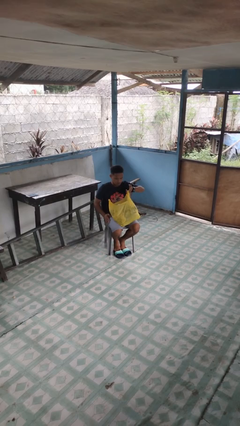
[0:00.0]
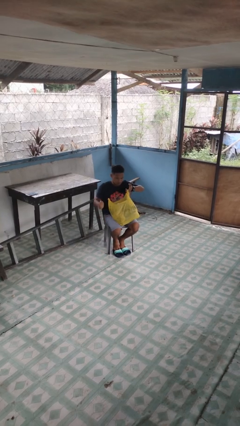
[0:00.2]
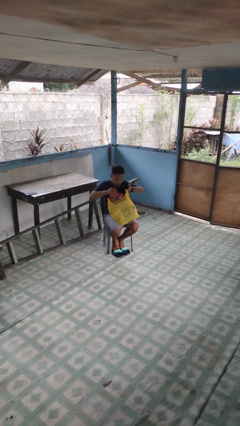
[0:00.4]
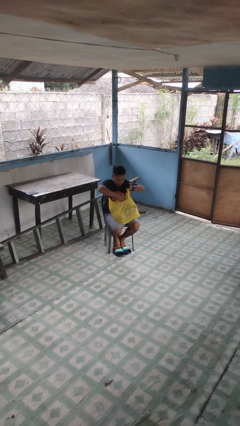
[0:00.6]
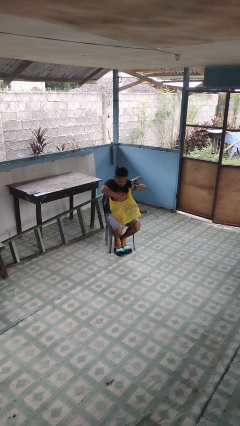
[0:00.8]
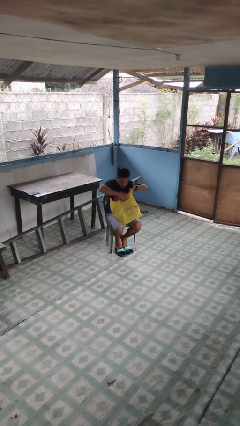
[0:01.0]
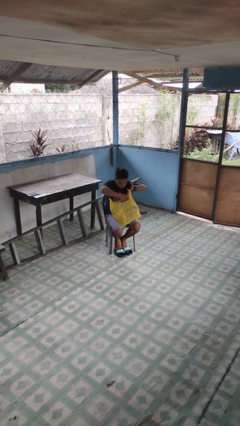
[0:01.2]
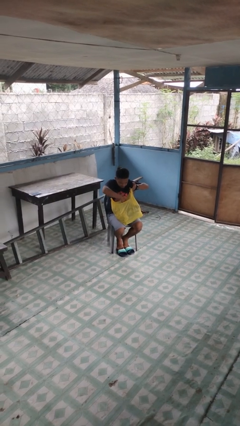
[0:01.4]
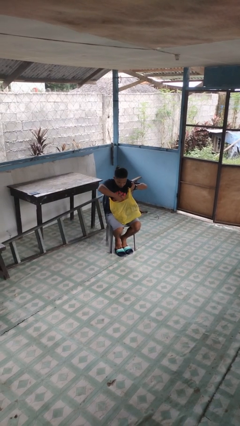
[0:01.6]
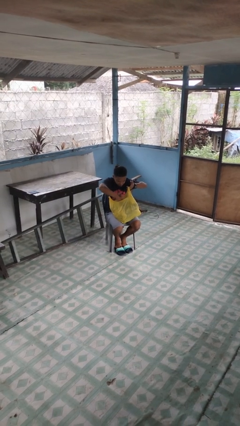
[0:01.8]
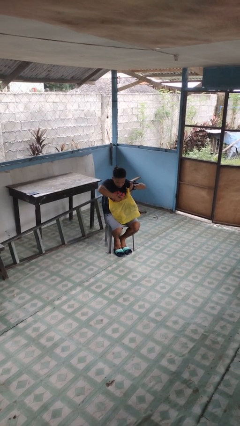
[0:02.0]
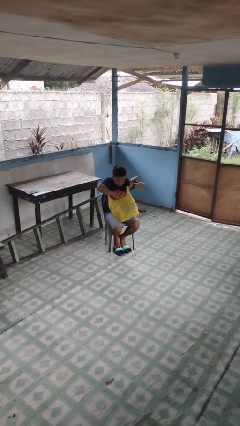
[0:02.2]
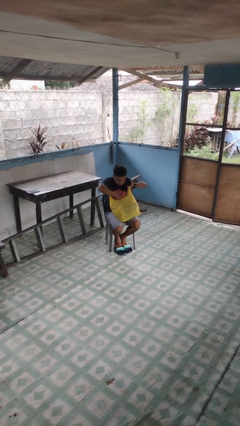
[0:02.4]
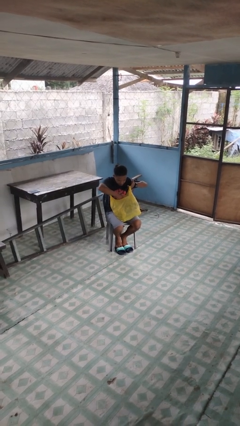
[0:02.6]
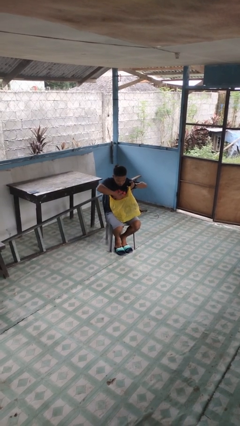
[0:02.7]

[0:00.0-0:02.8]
person searches in bag

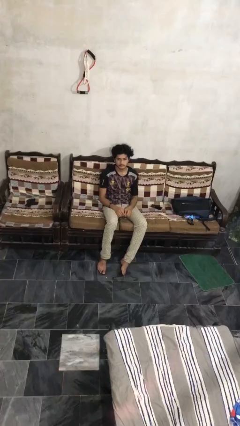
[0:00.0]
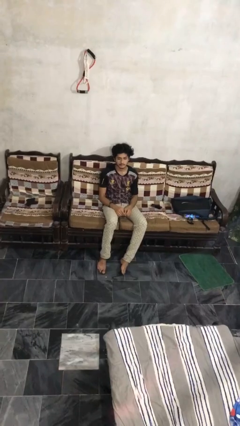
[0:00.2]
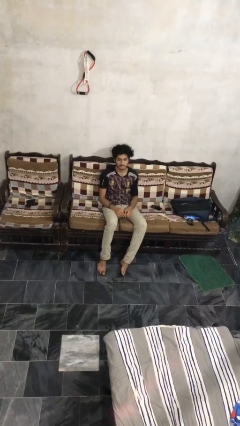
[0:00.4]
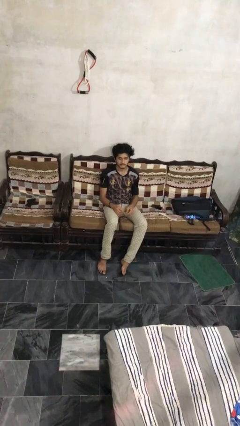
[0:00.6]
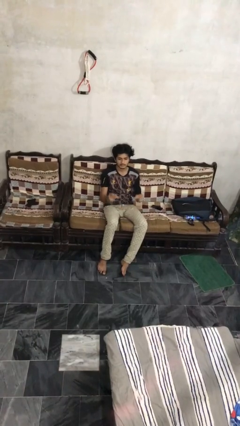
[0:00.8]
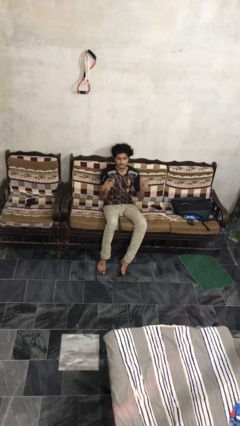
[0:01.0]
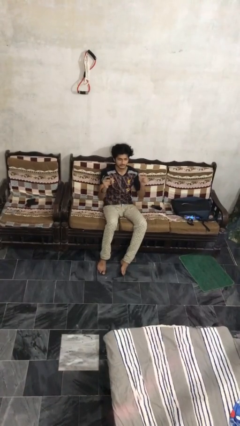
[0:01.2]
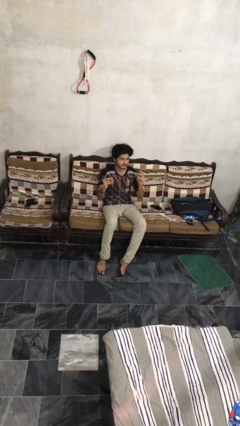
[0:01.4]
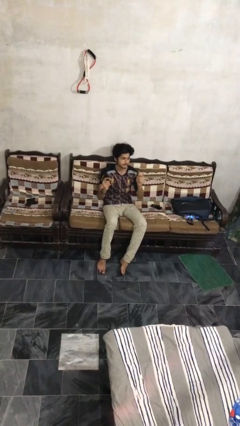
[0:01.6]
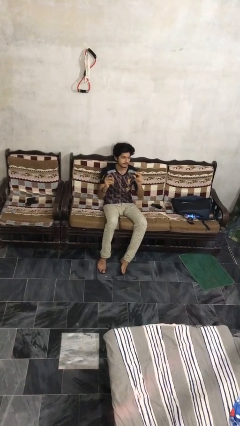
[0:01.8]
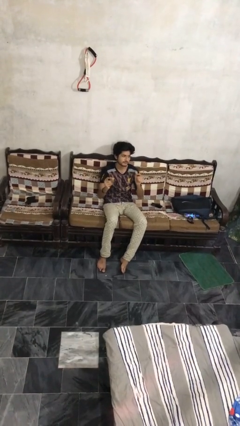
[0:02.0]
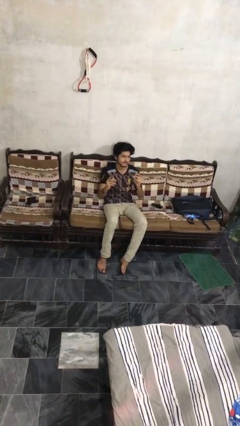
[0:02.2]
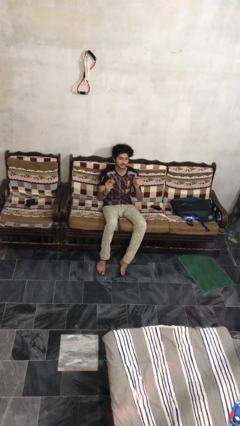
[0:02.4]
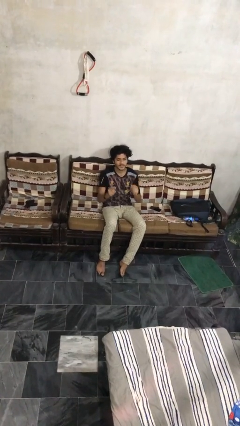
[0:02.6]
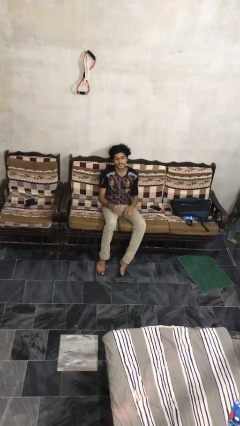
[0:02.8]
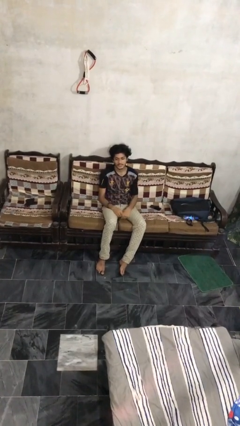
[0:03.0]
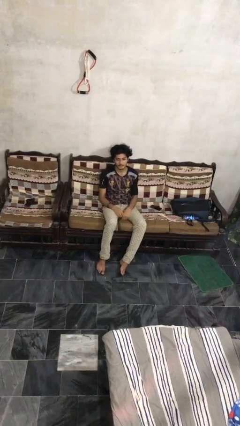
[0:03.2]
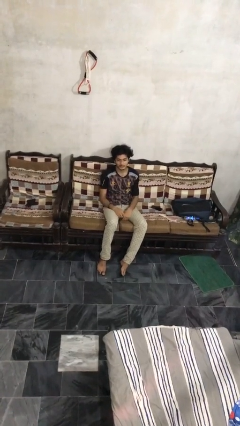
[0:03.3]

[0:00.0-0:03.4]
person snaps fingers

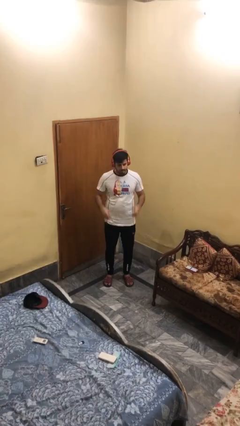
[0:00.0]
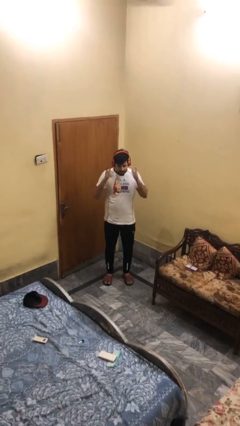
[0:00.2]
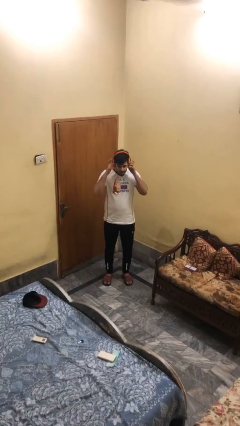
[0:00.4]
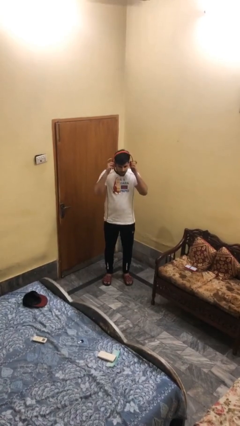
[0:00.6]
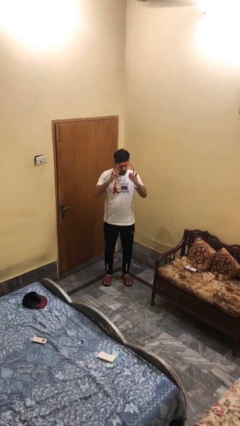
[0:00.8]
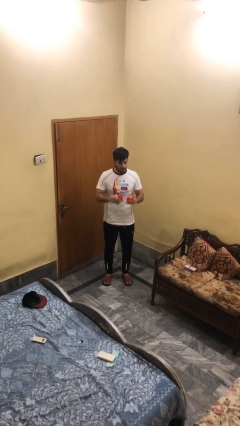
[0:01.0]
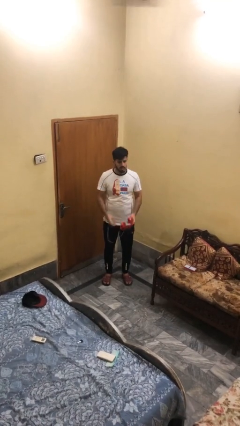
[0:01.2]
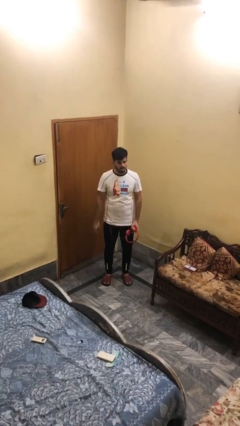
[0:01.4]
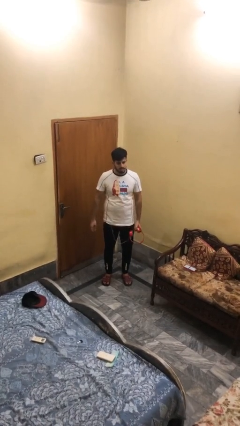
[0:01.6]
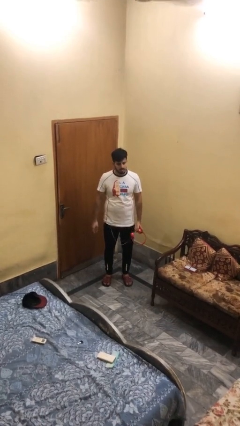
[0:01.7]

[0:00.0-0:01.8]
person takes off headphones

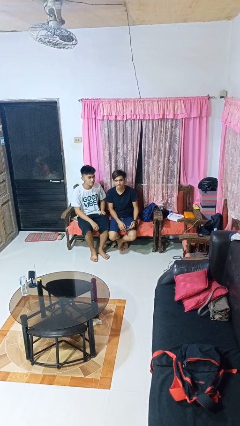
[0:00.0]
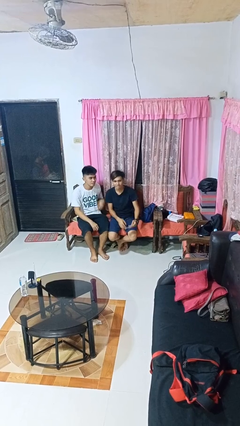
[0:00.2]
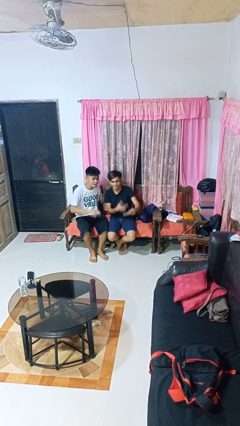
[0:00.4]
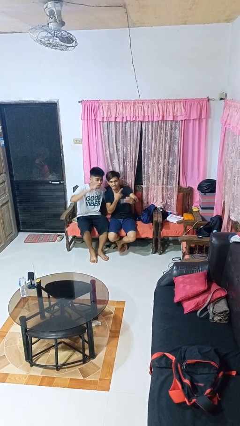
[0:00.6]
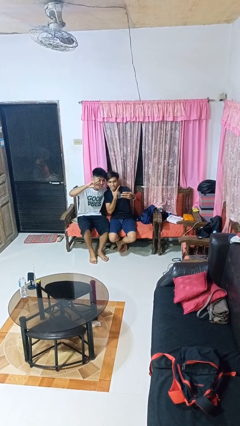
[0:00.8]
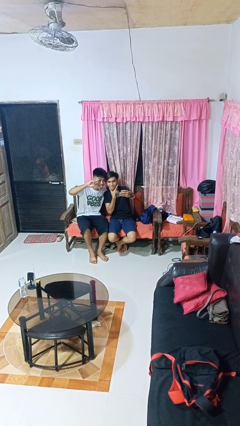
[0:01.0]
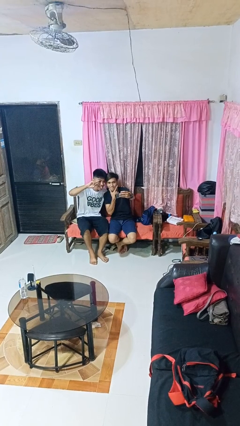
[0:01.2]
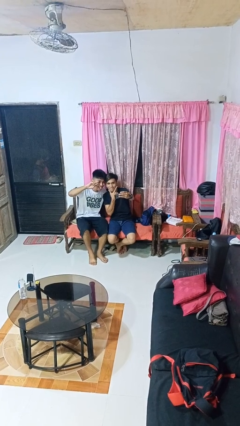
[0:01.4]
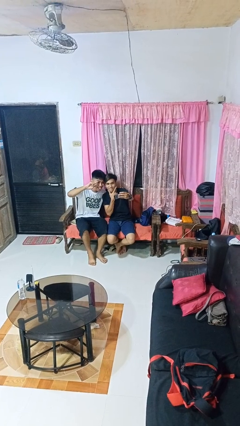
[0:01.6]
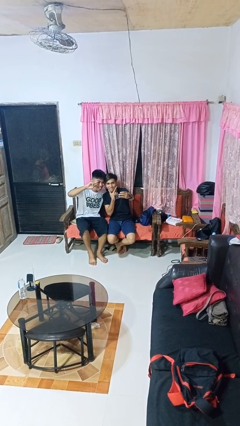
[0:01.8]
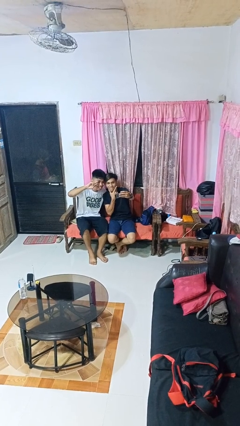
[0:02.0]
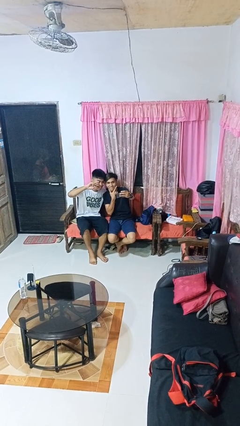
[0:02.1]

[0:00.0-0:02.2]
person takes selfie with person

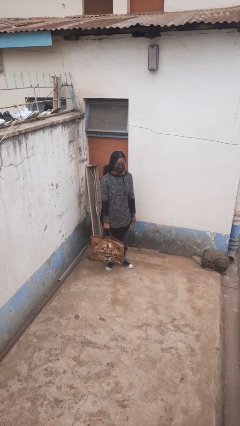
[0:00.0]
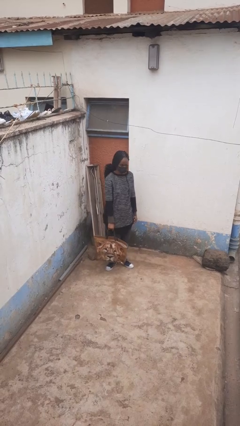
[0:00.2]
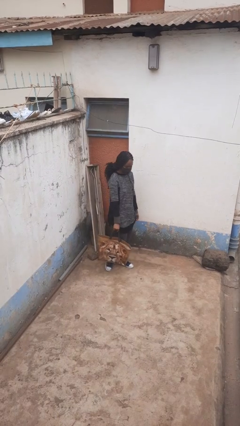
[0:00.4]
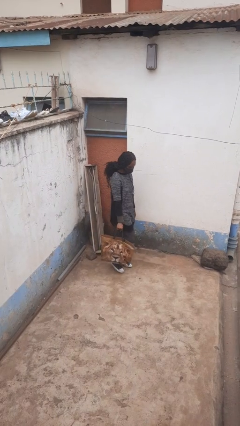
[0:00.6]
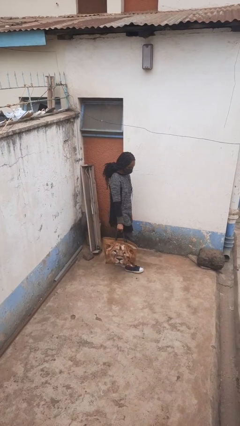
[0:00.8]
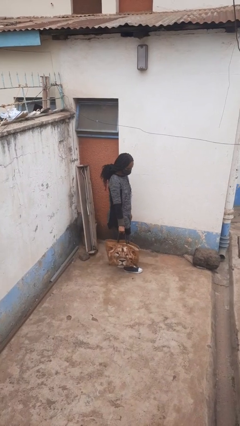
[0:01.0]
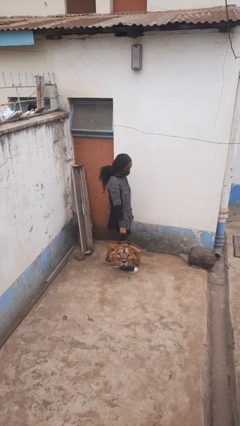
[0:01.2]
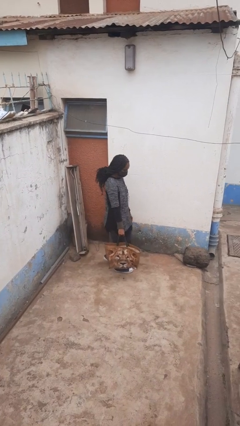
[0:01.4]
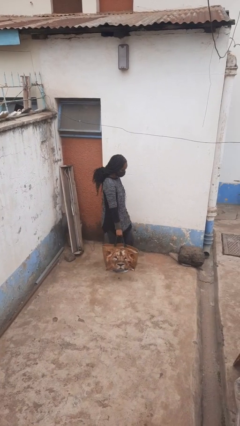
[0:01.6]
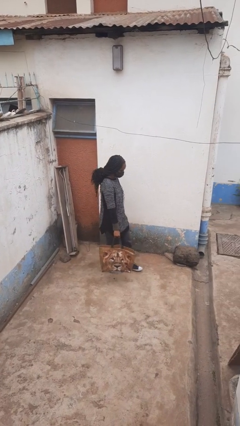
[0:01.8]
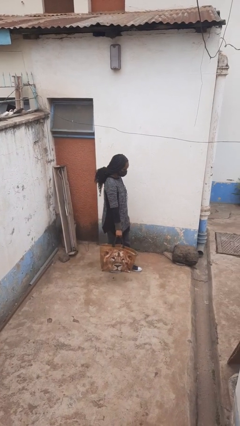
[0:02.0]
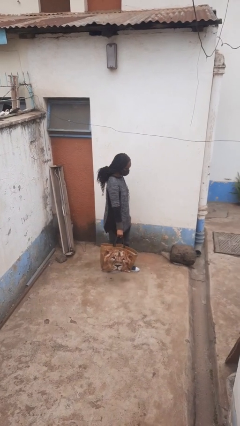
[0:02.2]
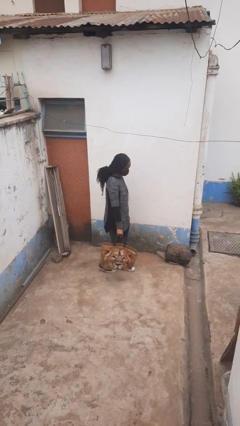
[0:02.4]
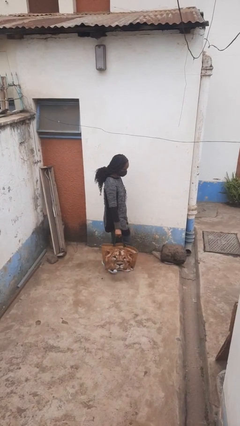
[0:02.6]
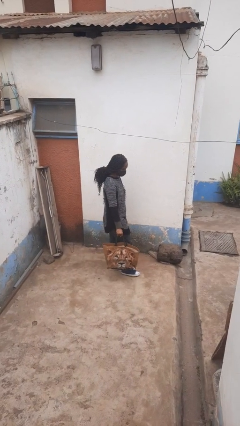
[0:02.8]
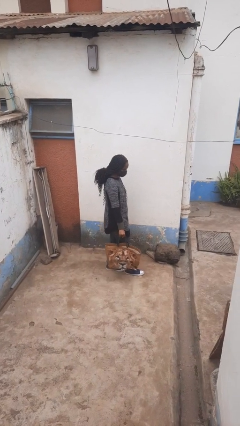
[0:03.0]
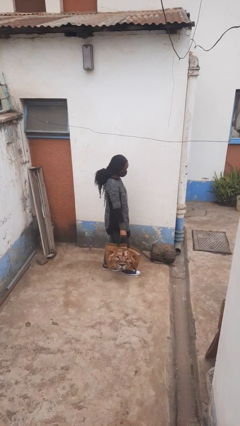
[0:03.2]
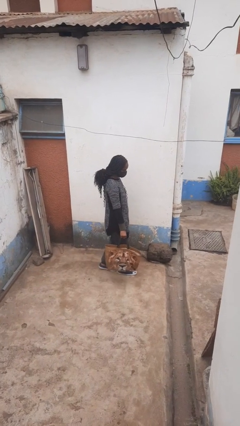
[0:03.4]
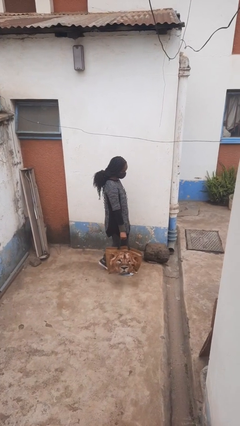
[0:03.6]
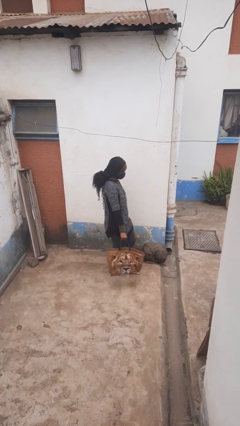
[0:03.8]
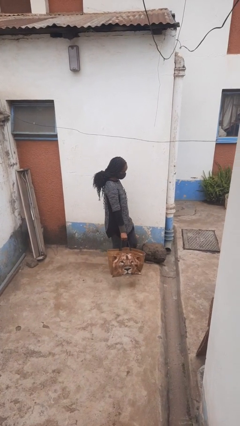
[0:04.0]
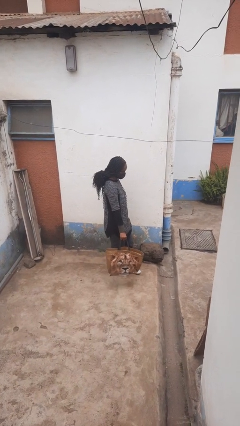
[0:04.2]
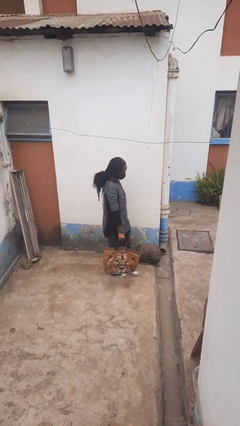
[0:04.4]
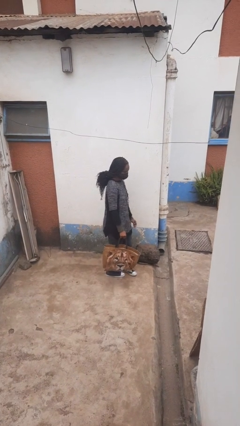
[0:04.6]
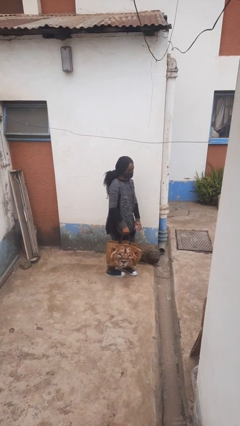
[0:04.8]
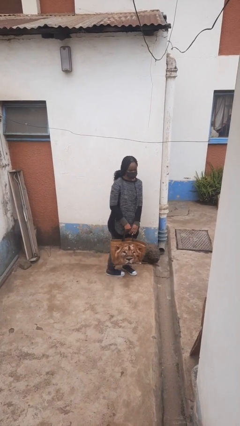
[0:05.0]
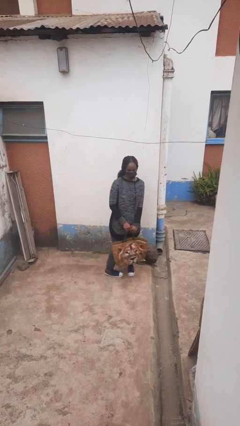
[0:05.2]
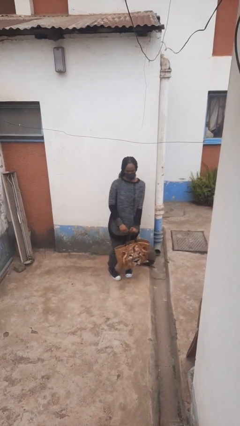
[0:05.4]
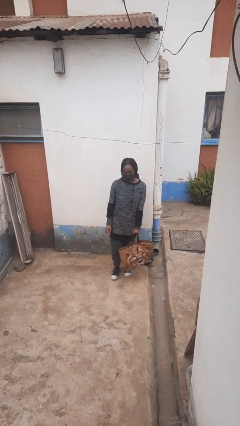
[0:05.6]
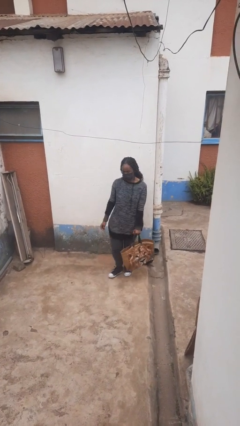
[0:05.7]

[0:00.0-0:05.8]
person carries groceries

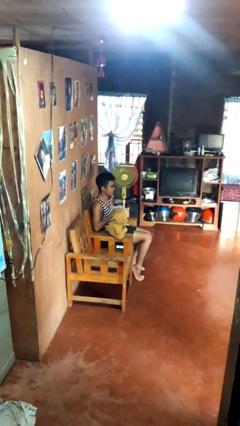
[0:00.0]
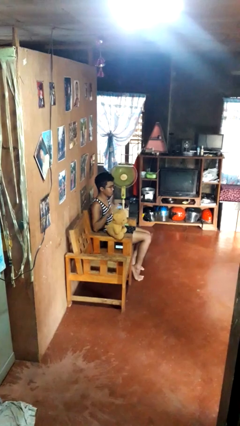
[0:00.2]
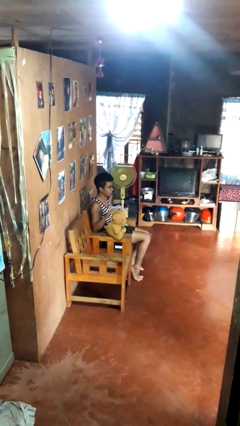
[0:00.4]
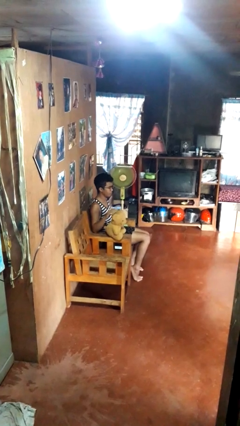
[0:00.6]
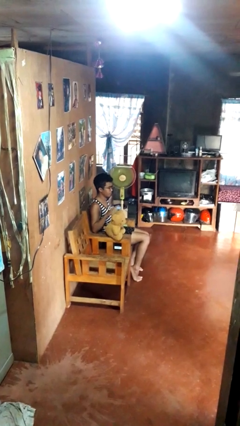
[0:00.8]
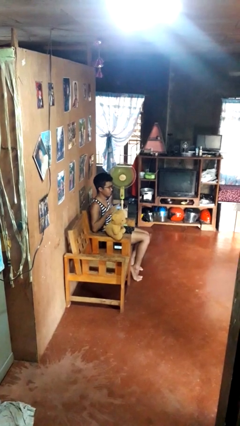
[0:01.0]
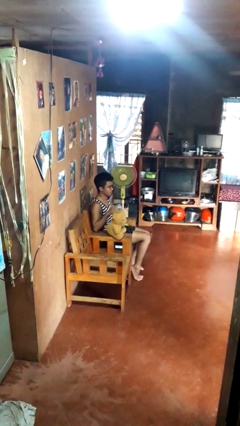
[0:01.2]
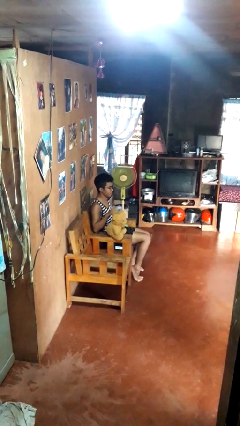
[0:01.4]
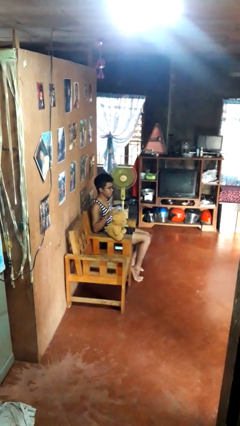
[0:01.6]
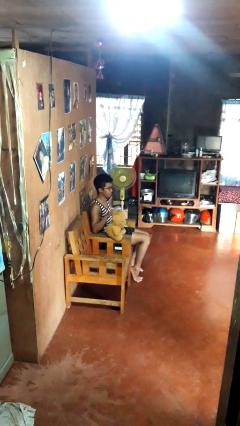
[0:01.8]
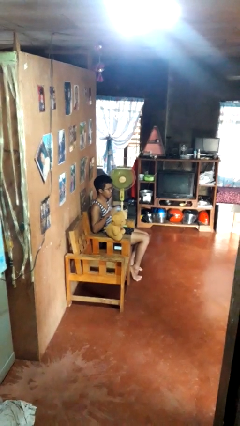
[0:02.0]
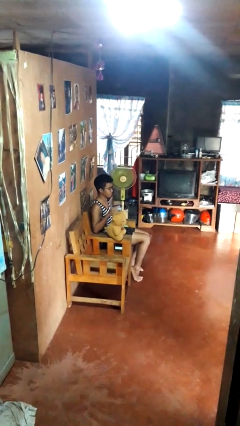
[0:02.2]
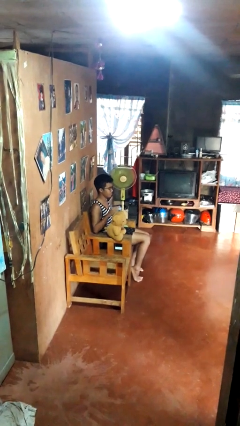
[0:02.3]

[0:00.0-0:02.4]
person waves hand over object
